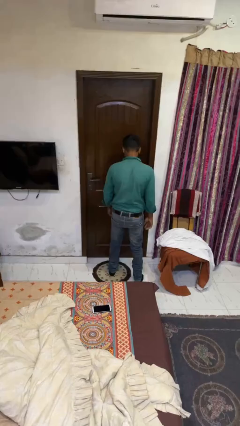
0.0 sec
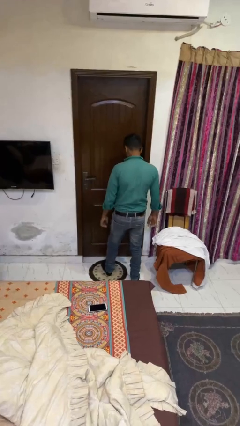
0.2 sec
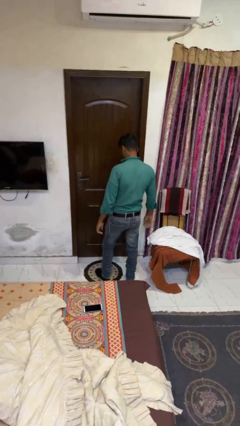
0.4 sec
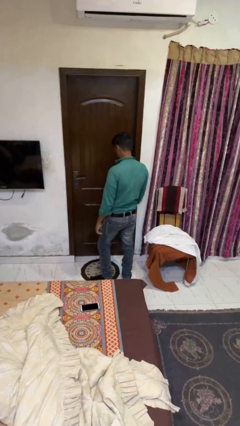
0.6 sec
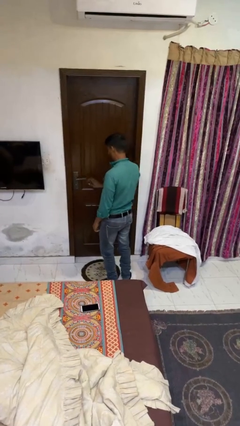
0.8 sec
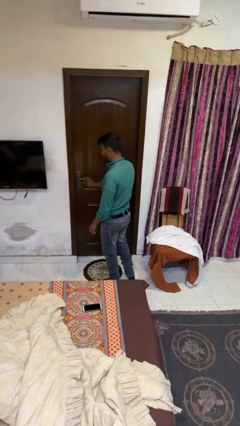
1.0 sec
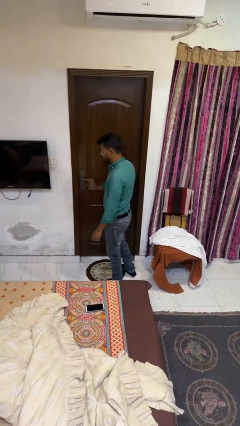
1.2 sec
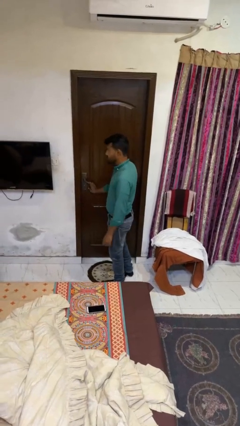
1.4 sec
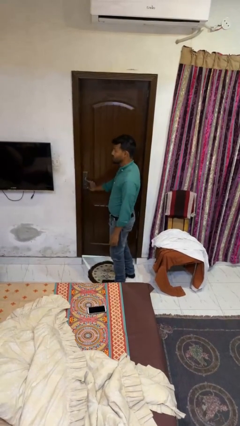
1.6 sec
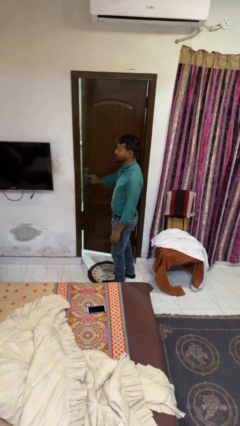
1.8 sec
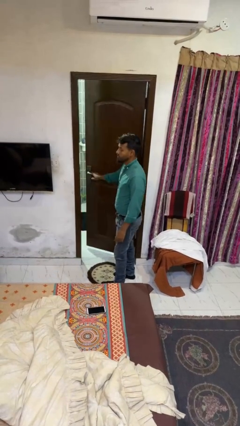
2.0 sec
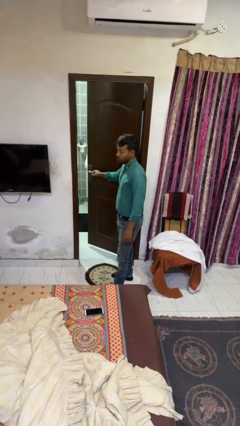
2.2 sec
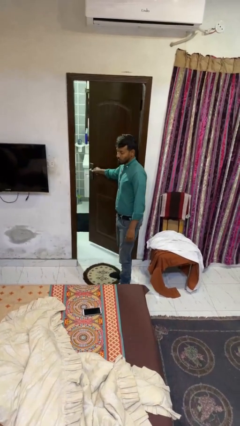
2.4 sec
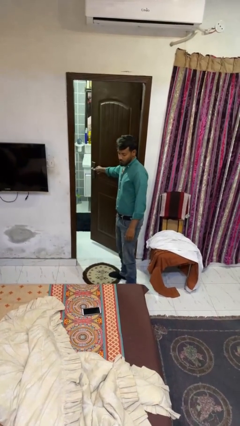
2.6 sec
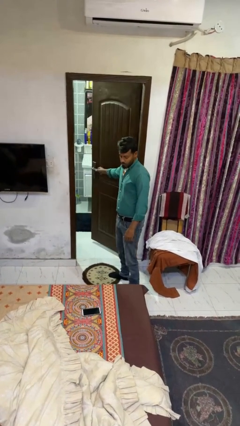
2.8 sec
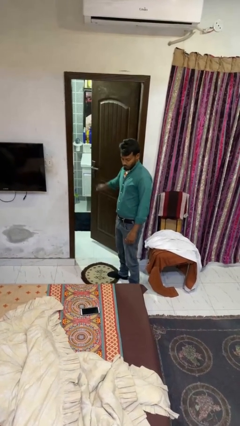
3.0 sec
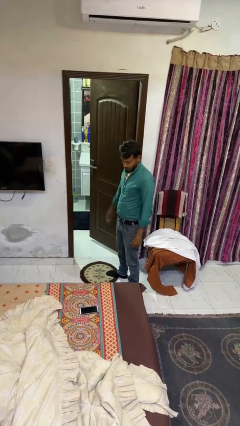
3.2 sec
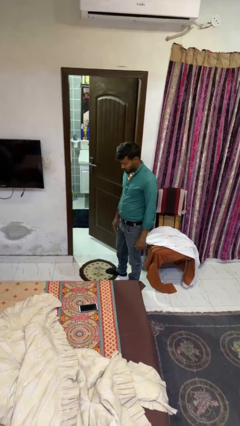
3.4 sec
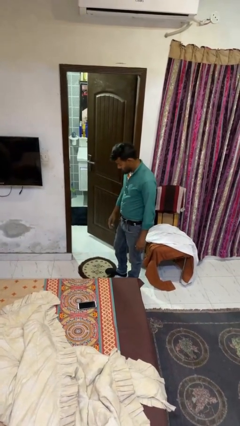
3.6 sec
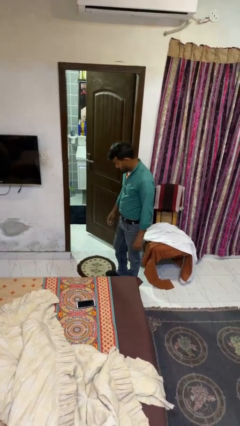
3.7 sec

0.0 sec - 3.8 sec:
person opens facility door

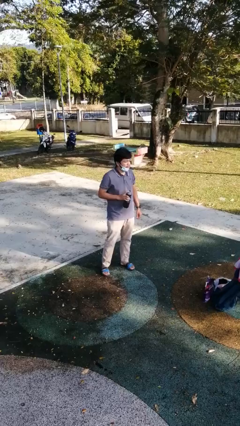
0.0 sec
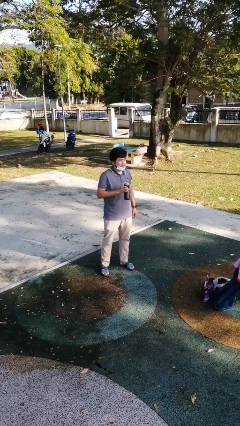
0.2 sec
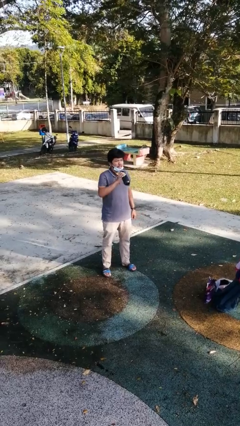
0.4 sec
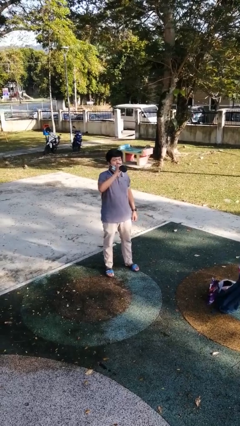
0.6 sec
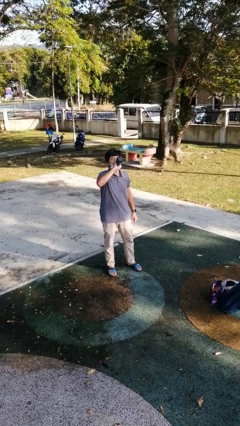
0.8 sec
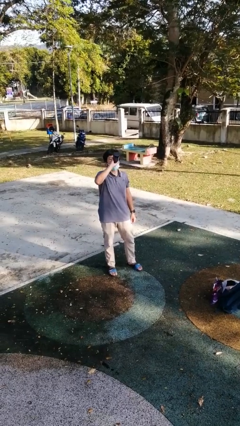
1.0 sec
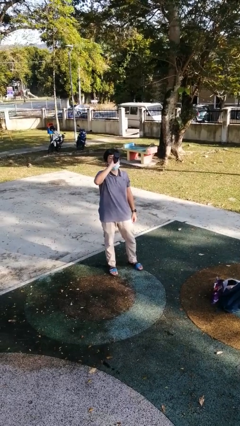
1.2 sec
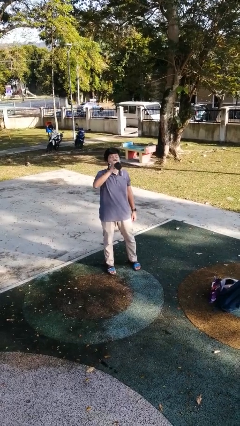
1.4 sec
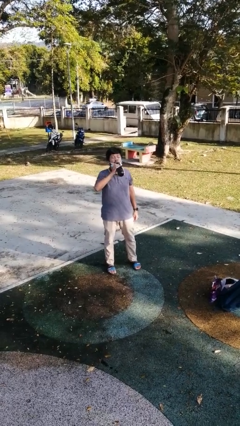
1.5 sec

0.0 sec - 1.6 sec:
person drinks from bottle

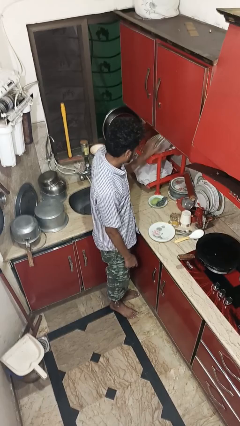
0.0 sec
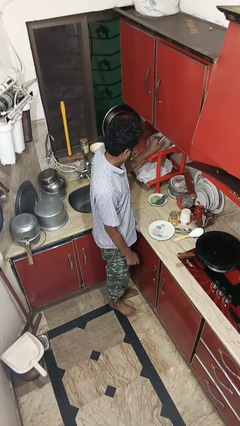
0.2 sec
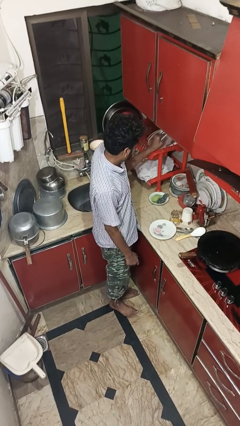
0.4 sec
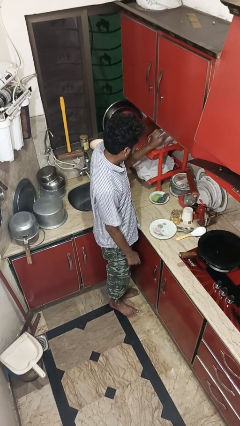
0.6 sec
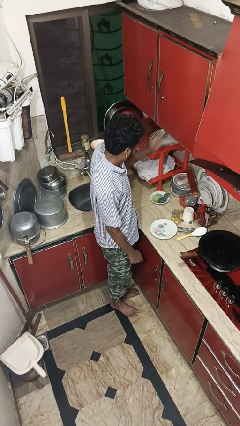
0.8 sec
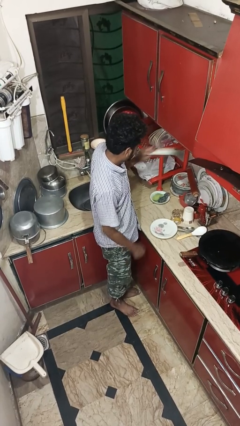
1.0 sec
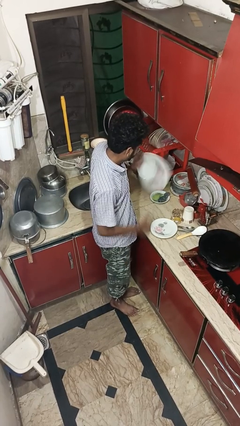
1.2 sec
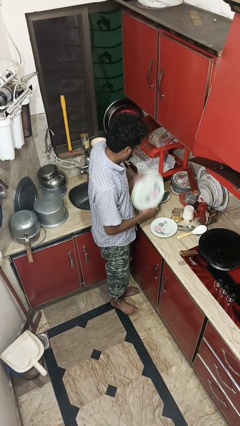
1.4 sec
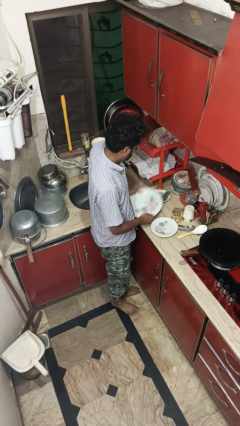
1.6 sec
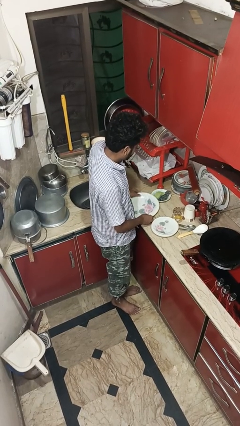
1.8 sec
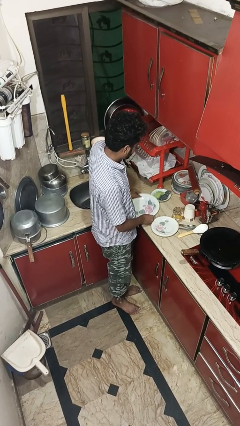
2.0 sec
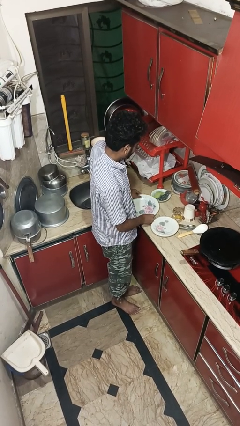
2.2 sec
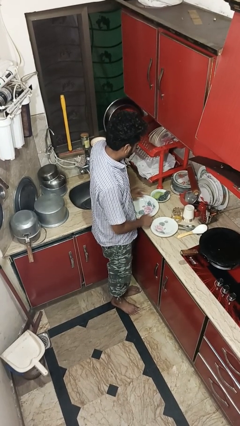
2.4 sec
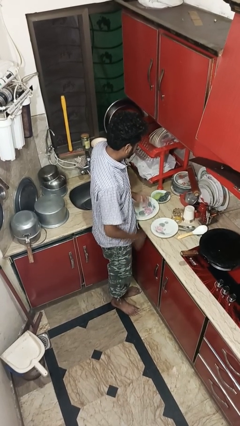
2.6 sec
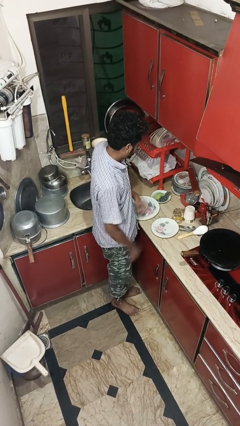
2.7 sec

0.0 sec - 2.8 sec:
person unloads dishwasher

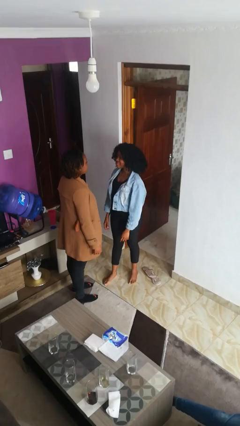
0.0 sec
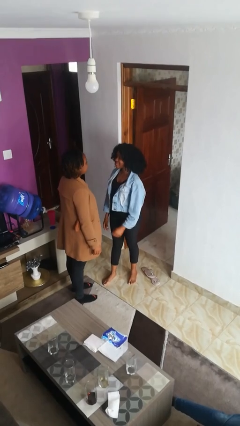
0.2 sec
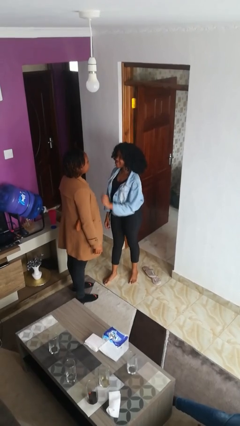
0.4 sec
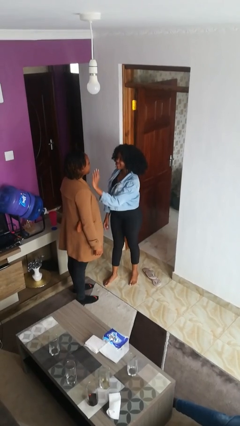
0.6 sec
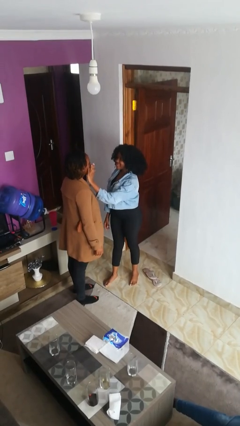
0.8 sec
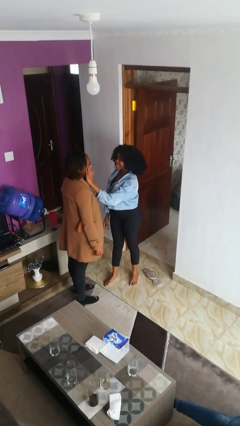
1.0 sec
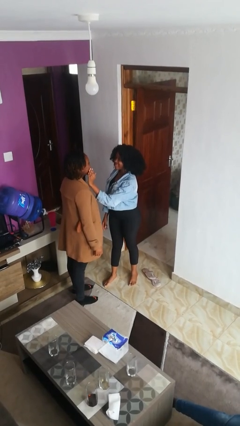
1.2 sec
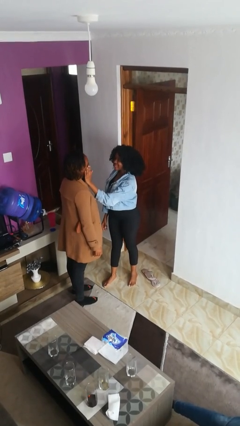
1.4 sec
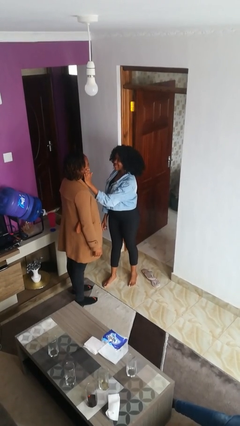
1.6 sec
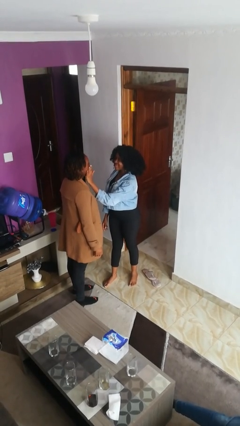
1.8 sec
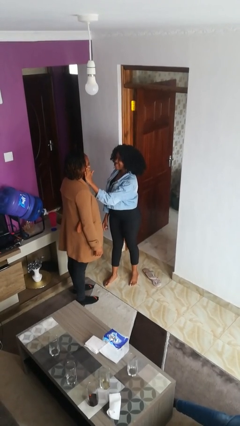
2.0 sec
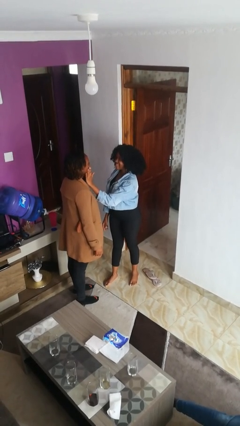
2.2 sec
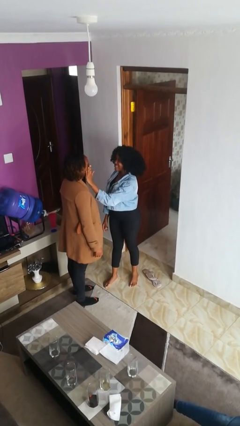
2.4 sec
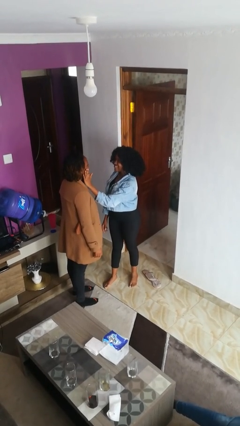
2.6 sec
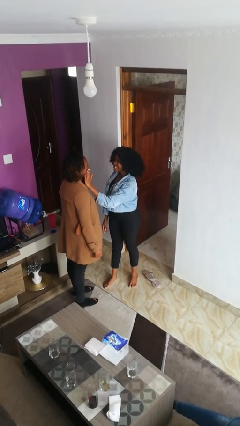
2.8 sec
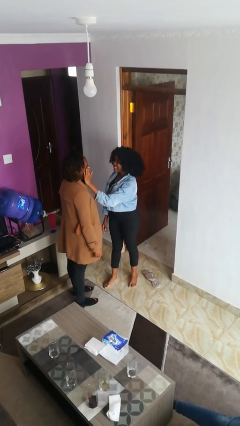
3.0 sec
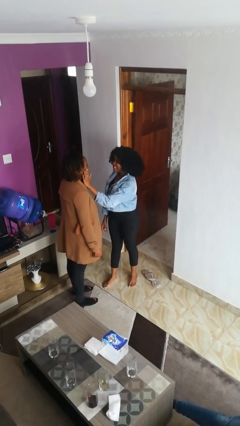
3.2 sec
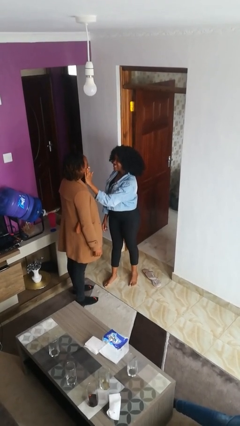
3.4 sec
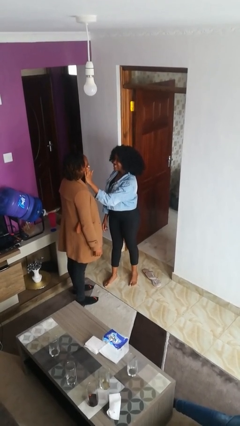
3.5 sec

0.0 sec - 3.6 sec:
person touches face of person

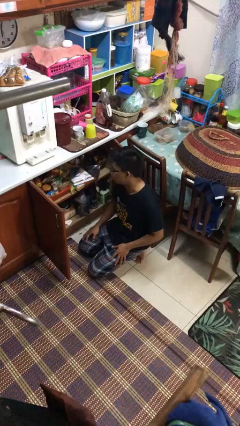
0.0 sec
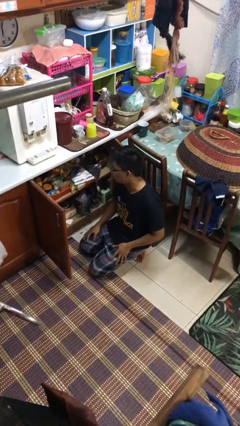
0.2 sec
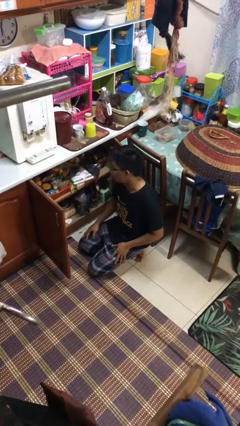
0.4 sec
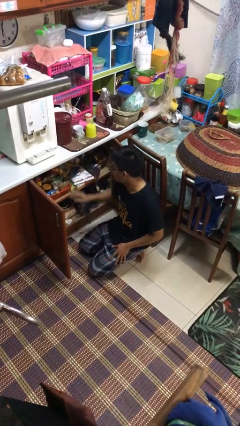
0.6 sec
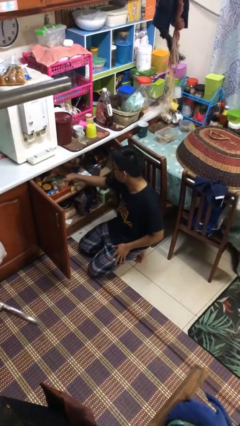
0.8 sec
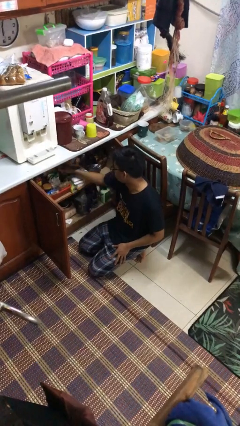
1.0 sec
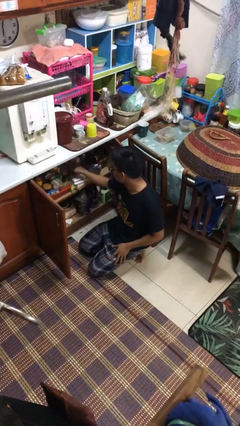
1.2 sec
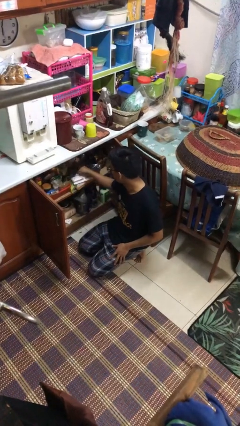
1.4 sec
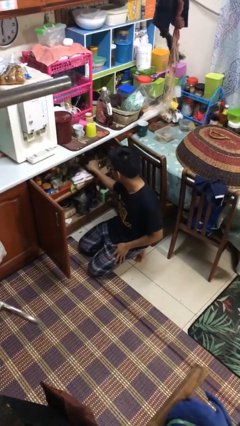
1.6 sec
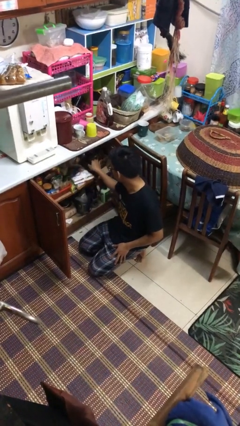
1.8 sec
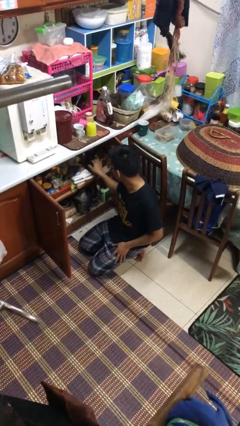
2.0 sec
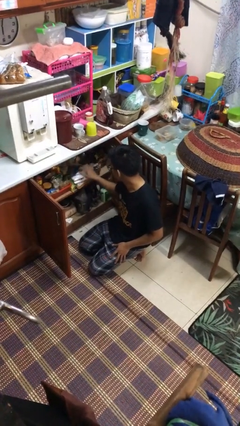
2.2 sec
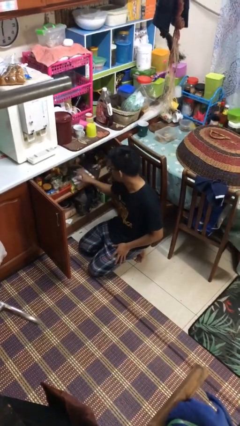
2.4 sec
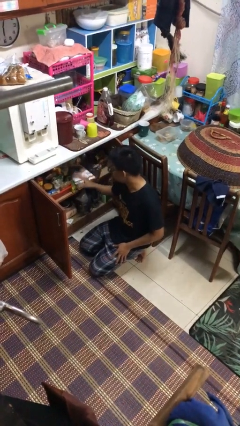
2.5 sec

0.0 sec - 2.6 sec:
person searches in kitchen drawer

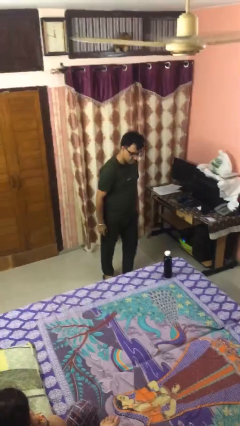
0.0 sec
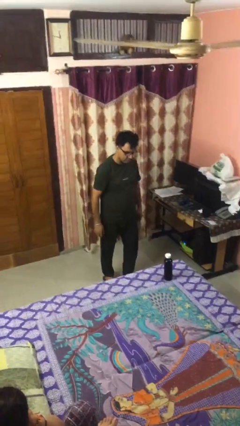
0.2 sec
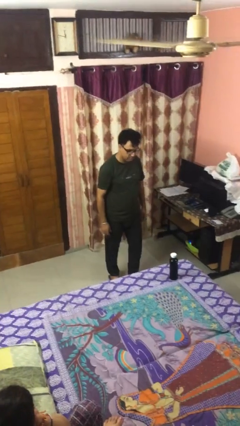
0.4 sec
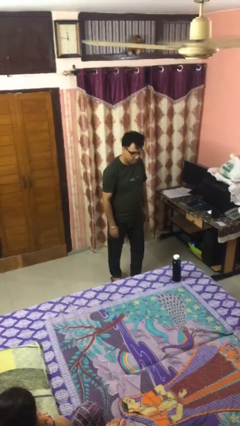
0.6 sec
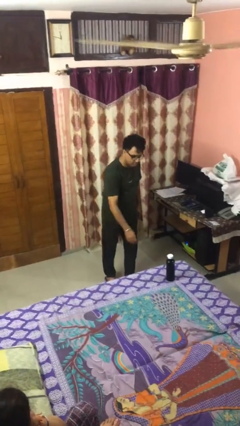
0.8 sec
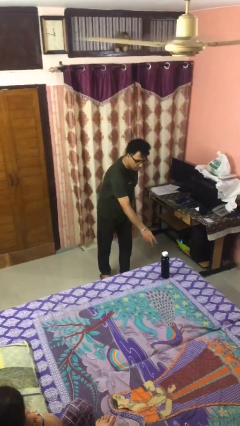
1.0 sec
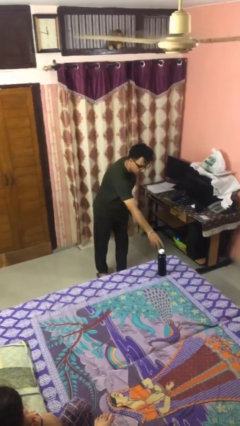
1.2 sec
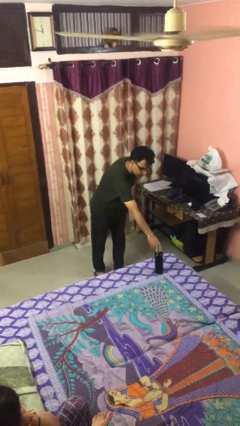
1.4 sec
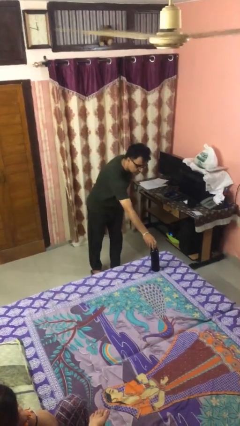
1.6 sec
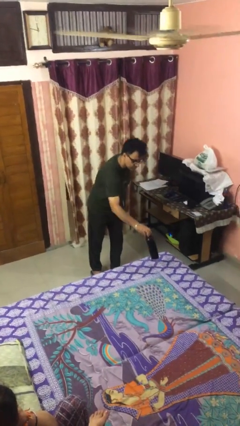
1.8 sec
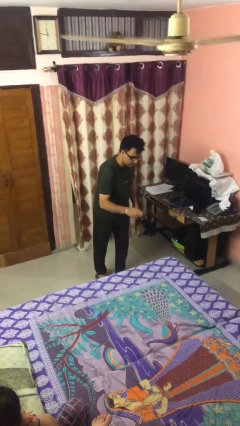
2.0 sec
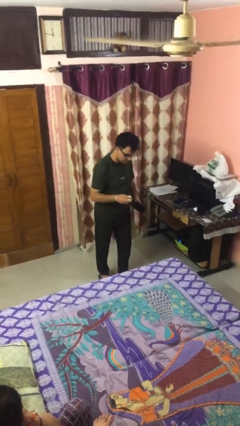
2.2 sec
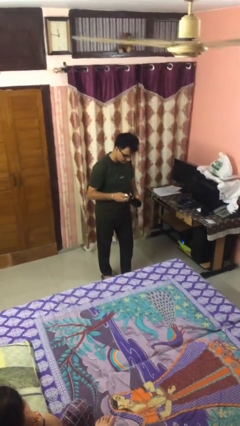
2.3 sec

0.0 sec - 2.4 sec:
person picks up object from bed

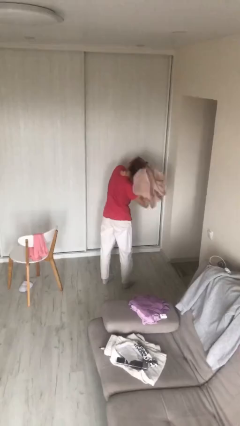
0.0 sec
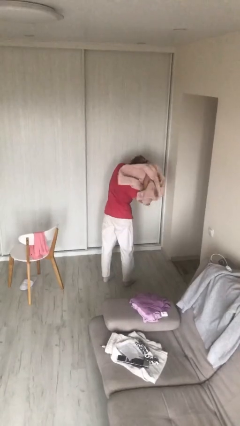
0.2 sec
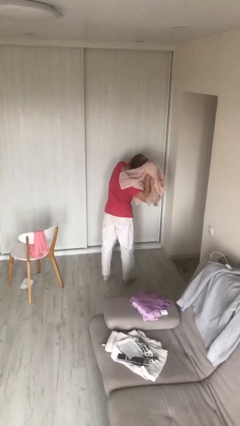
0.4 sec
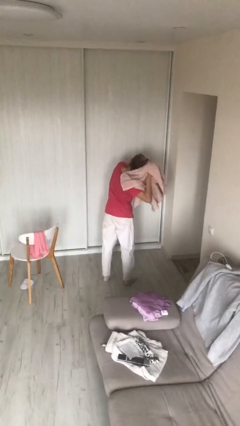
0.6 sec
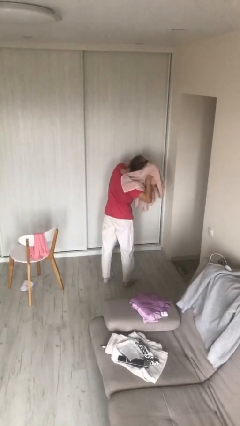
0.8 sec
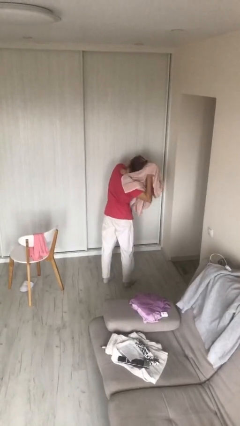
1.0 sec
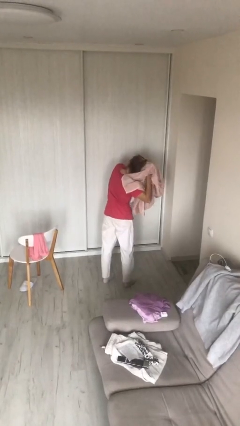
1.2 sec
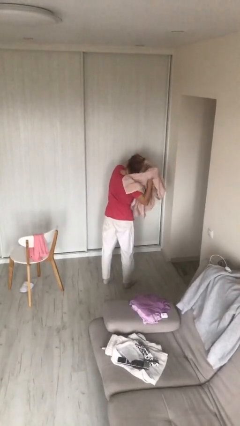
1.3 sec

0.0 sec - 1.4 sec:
person dries hair with towel
